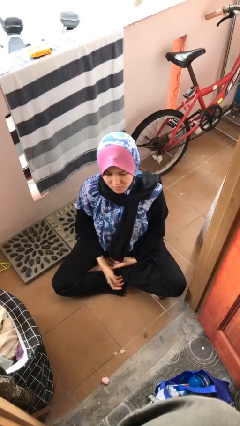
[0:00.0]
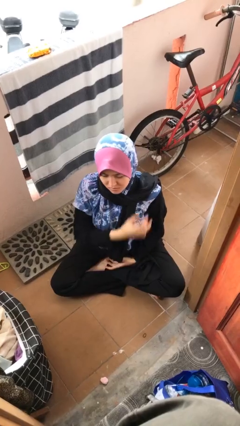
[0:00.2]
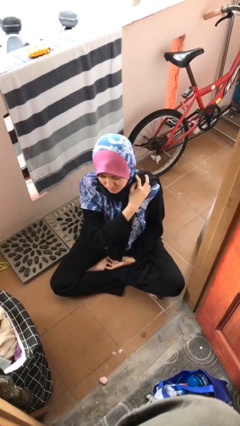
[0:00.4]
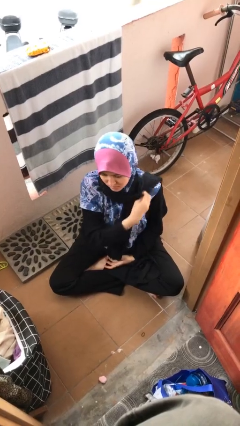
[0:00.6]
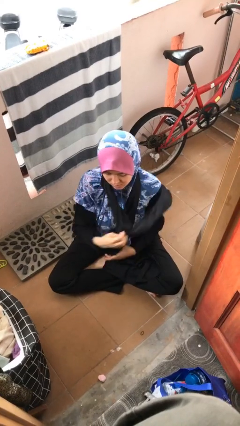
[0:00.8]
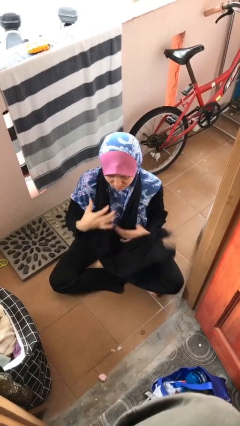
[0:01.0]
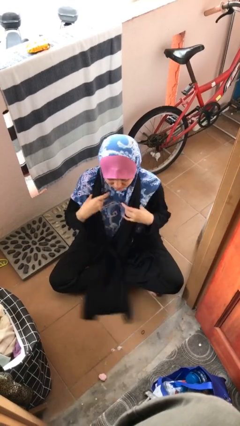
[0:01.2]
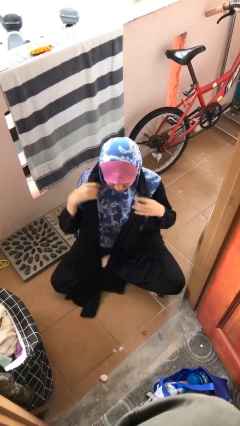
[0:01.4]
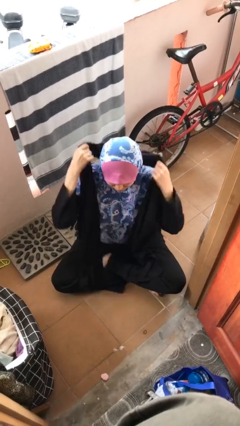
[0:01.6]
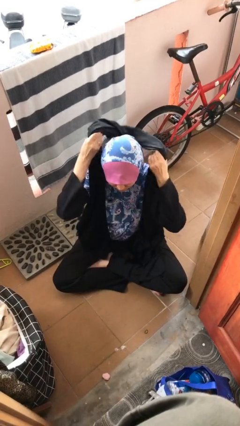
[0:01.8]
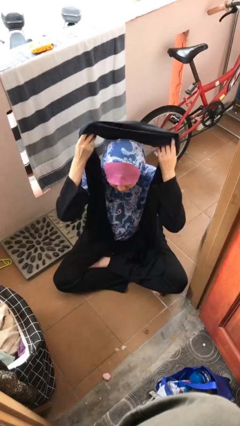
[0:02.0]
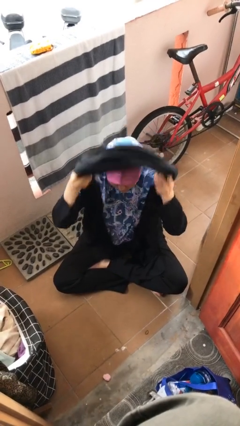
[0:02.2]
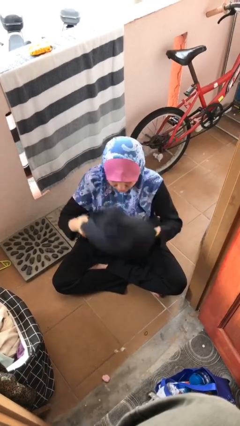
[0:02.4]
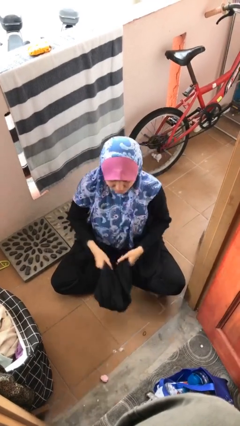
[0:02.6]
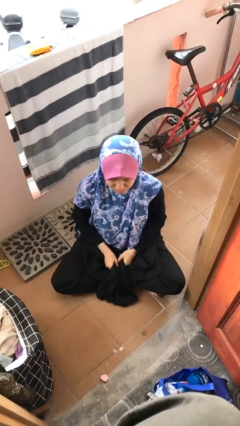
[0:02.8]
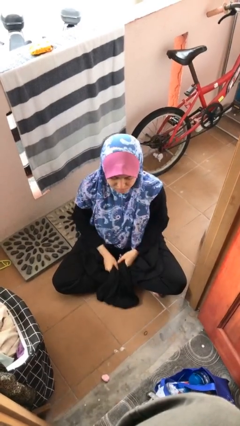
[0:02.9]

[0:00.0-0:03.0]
person takes off scarf

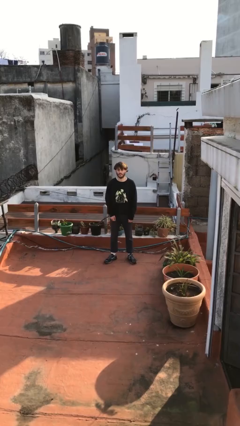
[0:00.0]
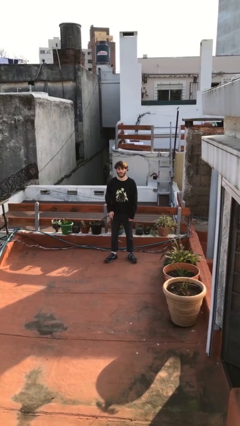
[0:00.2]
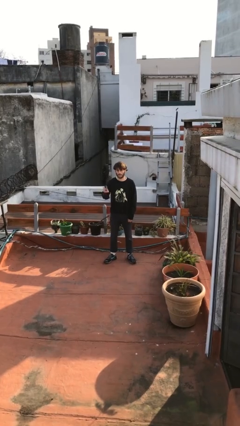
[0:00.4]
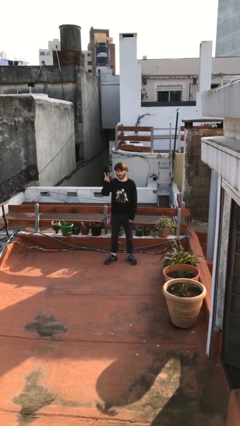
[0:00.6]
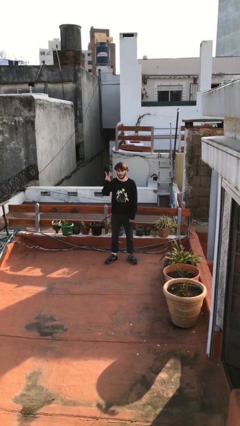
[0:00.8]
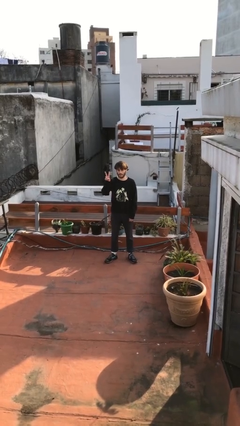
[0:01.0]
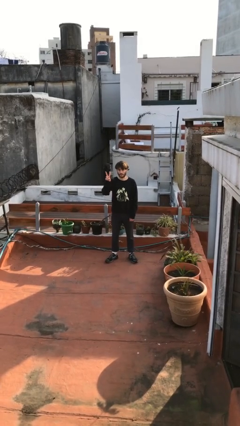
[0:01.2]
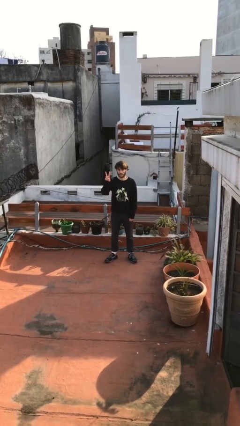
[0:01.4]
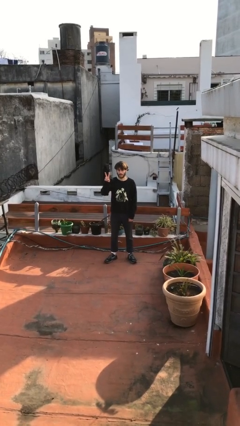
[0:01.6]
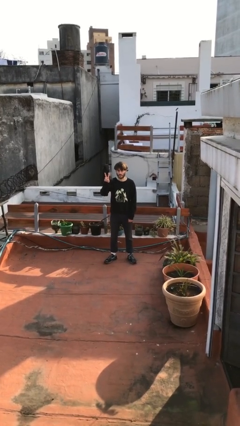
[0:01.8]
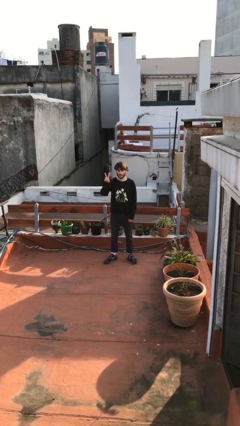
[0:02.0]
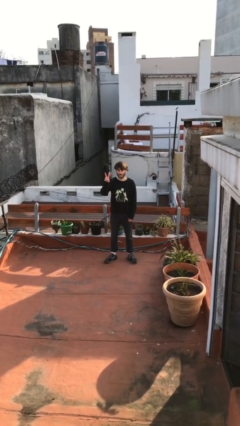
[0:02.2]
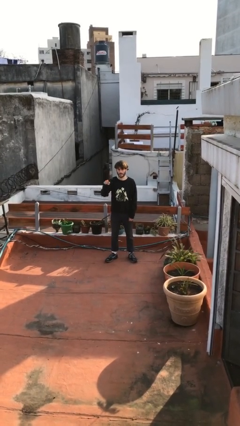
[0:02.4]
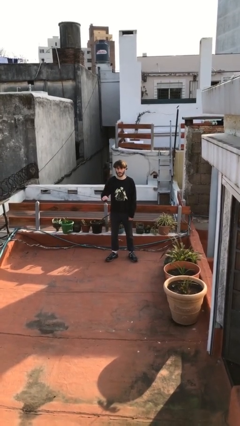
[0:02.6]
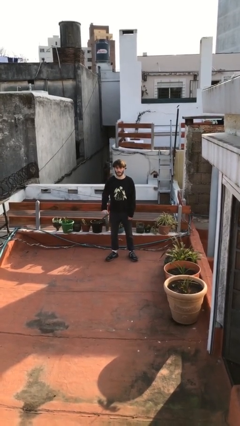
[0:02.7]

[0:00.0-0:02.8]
person gestures peace

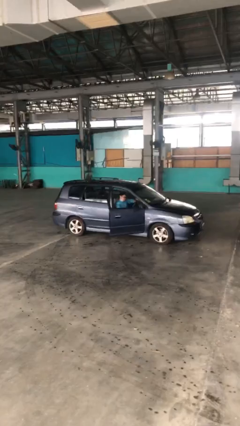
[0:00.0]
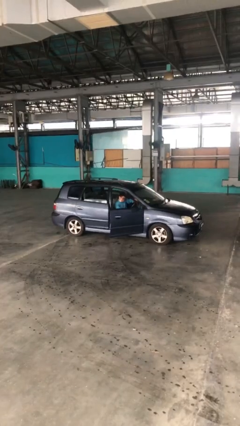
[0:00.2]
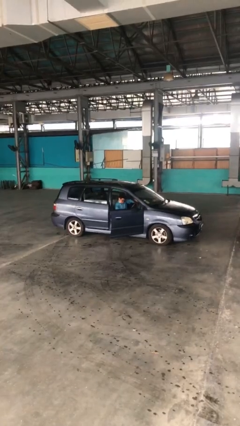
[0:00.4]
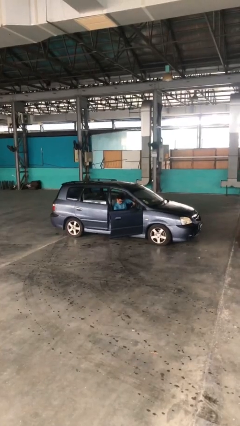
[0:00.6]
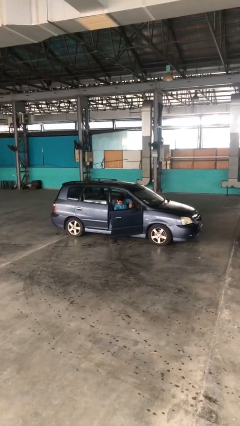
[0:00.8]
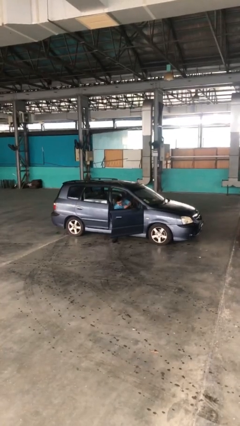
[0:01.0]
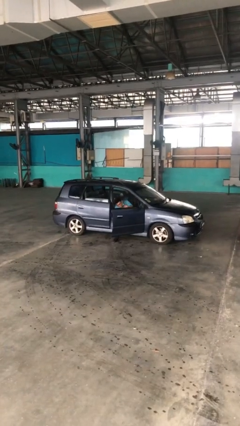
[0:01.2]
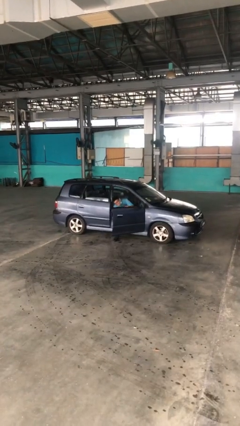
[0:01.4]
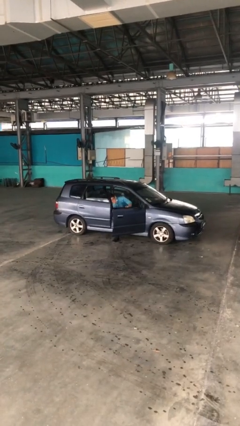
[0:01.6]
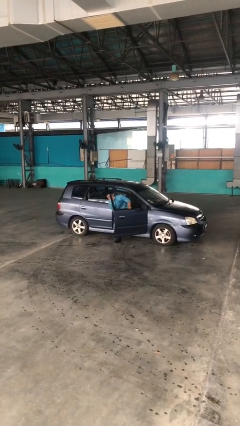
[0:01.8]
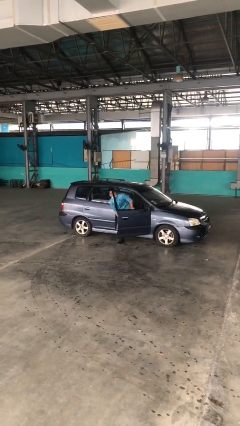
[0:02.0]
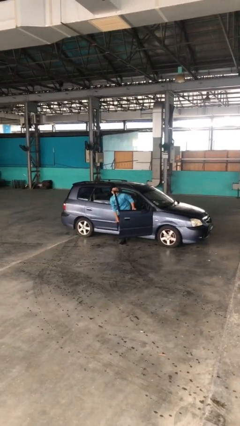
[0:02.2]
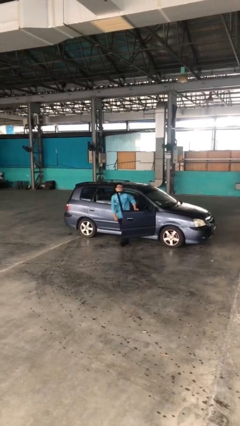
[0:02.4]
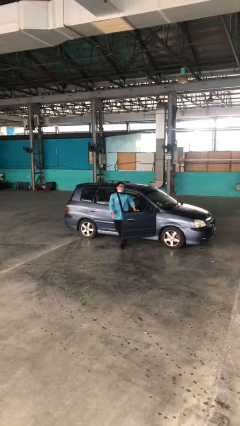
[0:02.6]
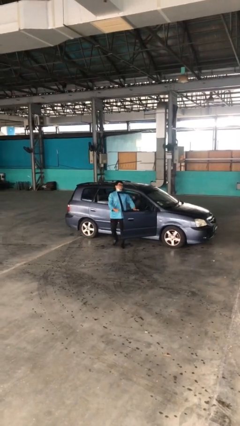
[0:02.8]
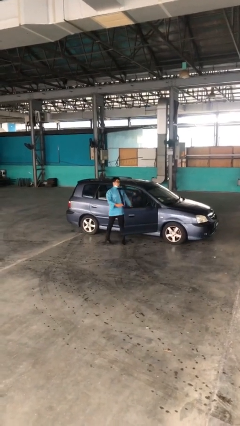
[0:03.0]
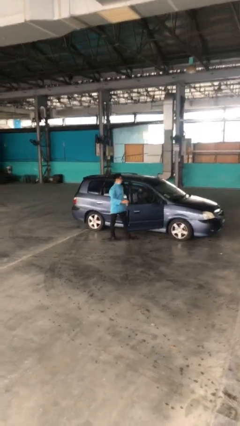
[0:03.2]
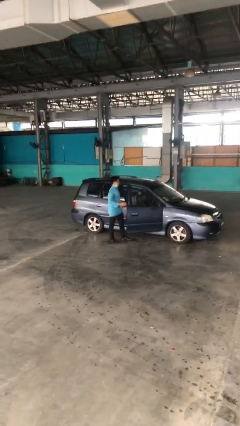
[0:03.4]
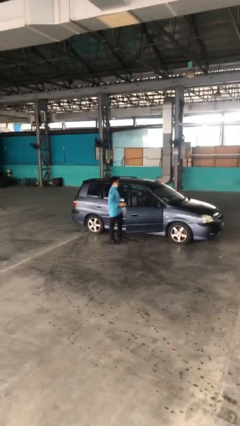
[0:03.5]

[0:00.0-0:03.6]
person exits car

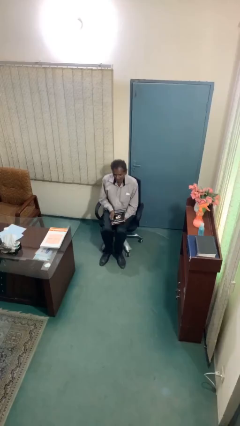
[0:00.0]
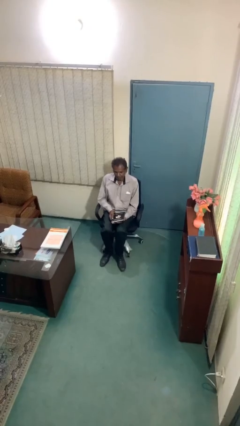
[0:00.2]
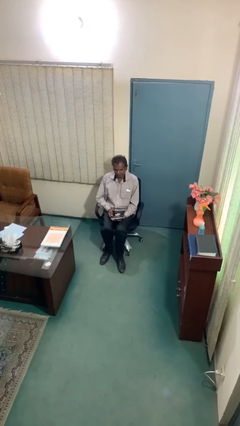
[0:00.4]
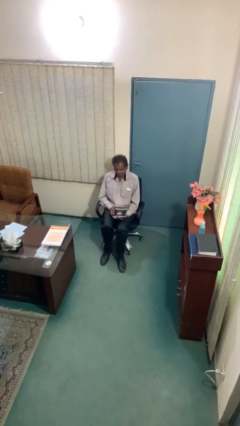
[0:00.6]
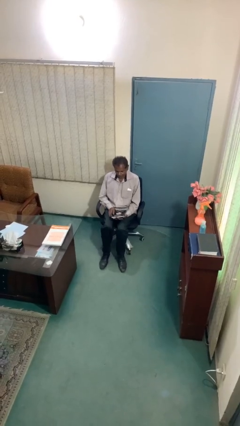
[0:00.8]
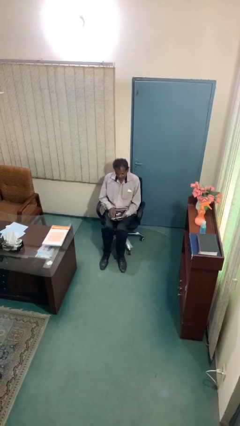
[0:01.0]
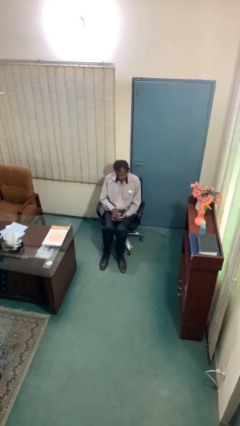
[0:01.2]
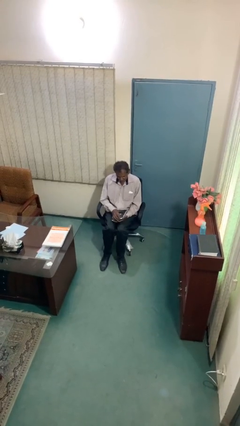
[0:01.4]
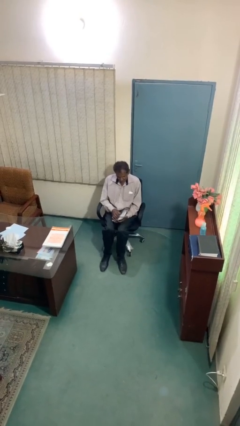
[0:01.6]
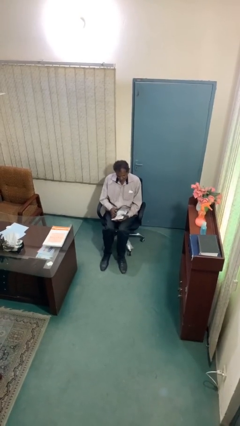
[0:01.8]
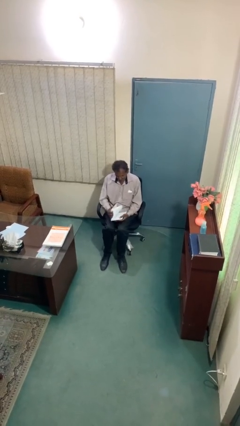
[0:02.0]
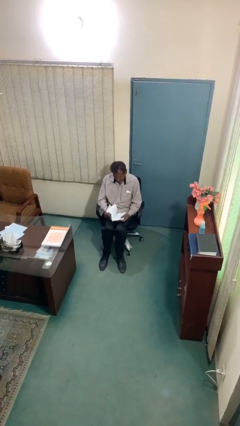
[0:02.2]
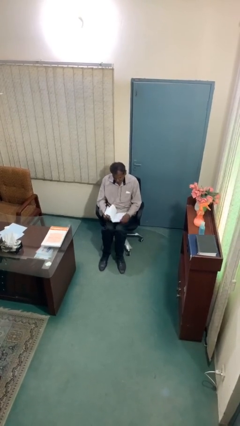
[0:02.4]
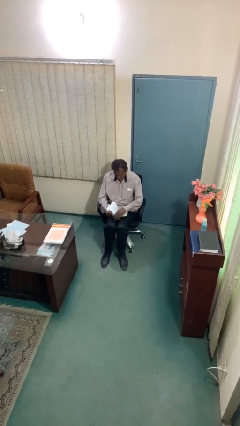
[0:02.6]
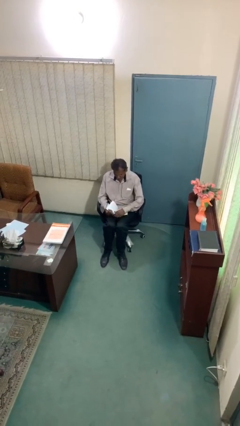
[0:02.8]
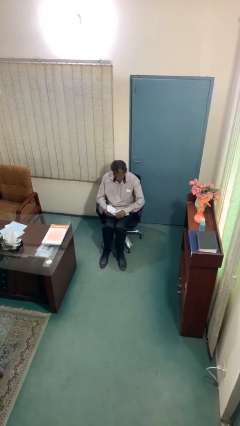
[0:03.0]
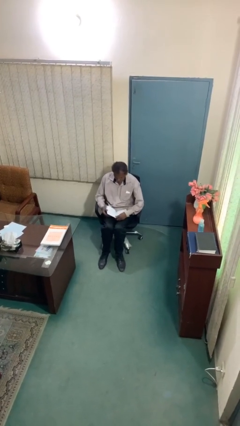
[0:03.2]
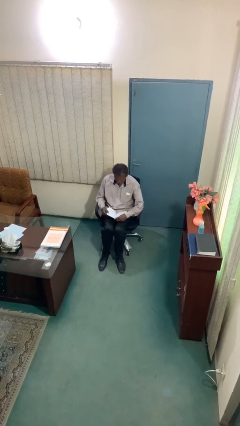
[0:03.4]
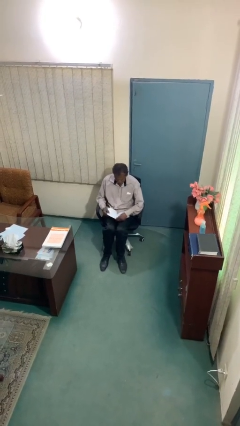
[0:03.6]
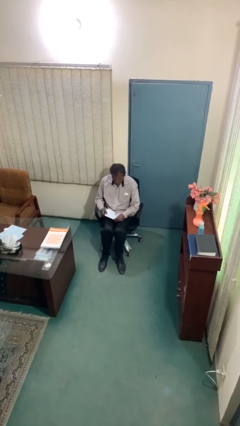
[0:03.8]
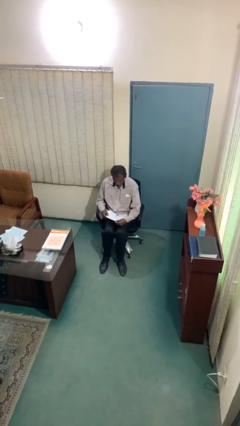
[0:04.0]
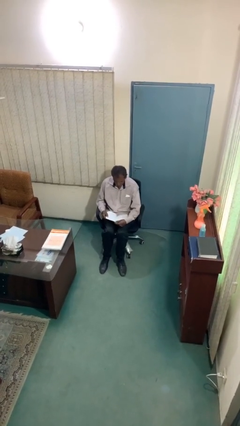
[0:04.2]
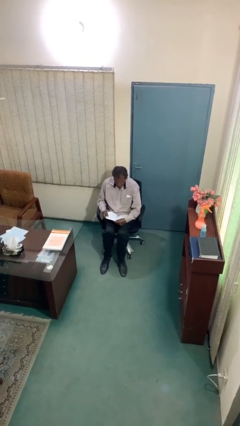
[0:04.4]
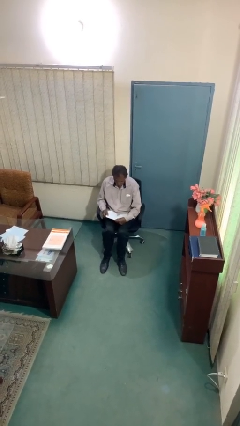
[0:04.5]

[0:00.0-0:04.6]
person reads document

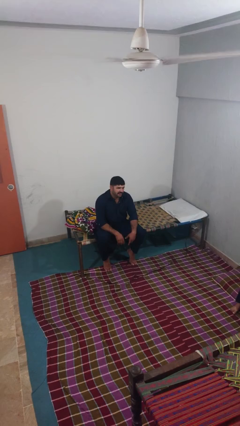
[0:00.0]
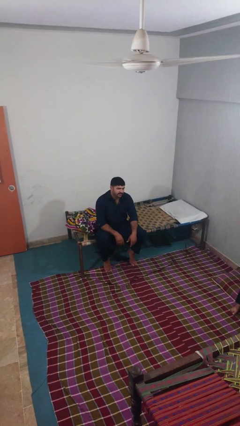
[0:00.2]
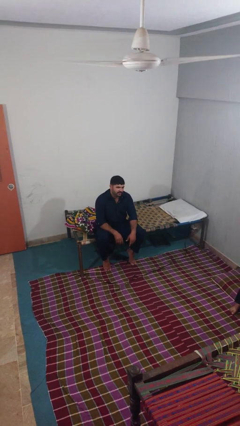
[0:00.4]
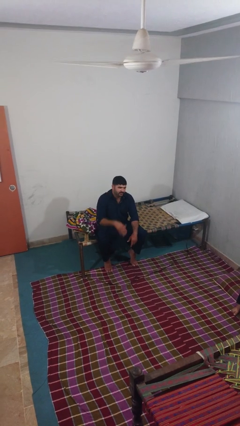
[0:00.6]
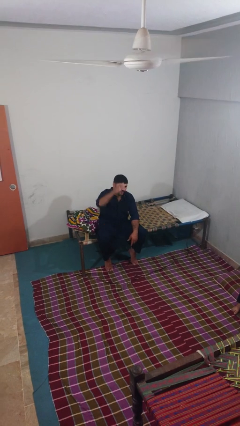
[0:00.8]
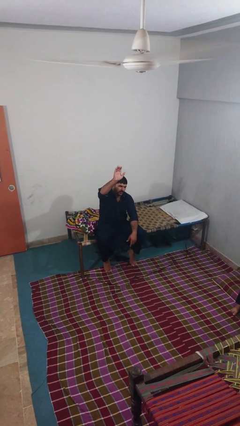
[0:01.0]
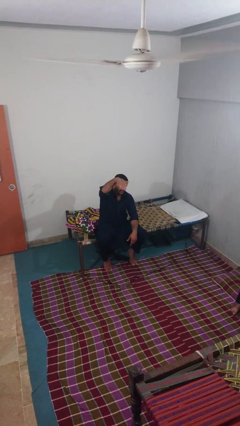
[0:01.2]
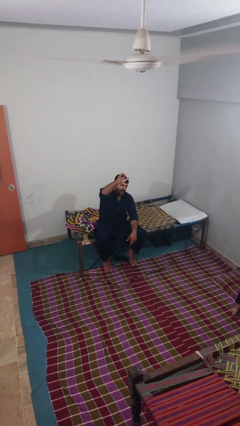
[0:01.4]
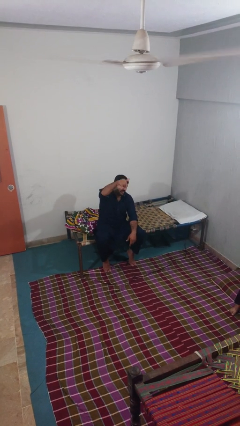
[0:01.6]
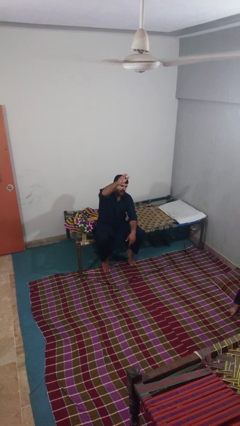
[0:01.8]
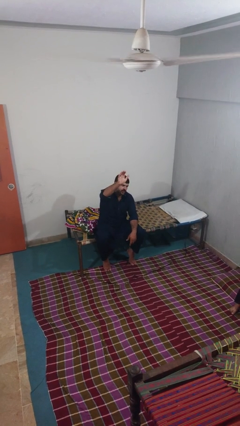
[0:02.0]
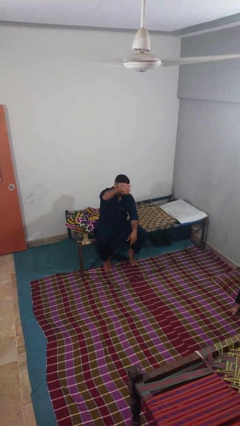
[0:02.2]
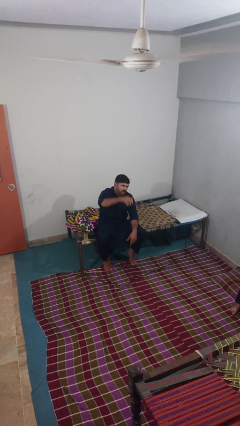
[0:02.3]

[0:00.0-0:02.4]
person gestures come here

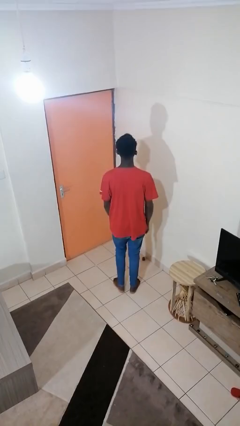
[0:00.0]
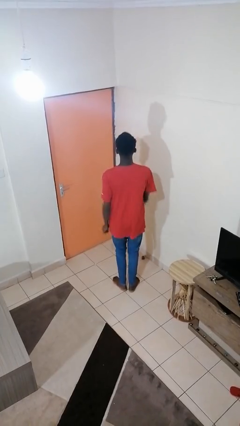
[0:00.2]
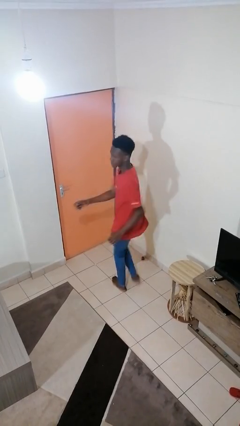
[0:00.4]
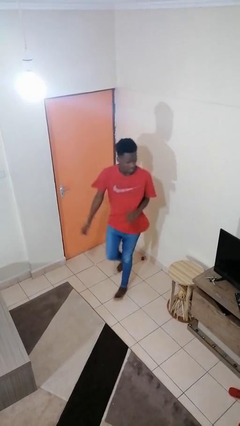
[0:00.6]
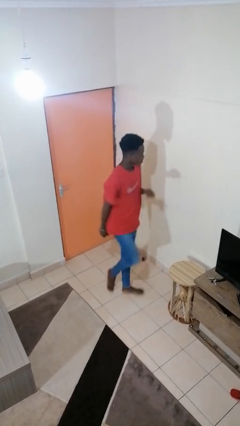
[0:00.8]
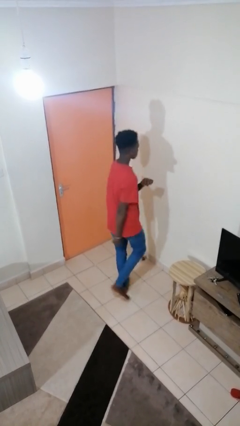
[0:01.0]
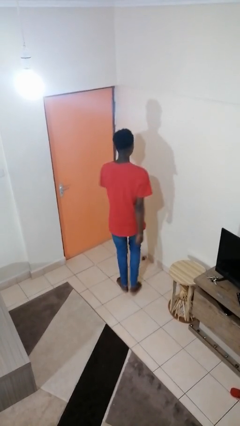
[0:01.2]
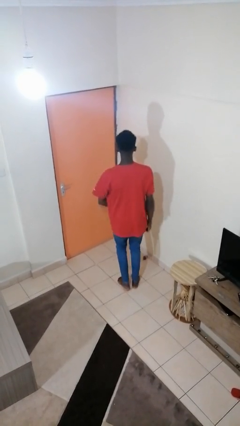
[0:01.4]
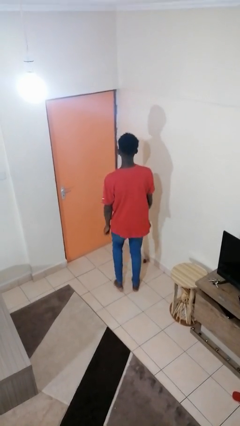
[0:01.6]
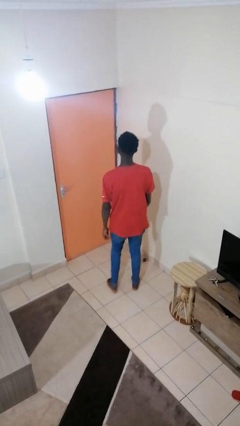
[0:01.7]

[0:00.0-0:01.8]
person twirls
